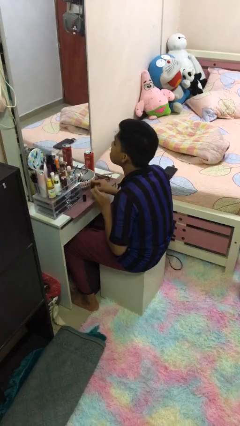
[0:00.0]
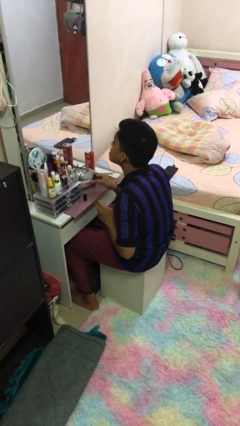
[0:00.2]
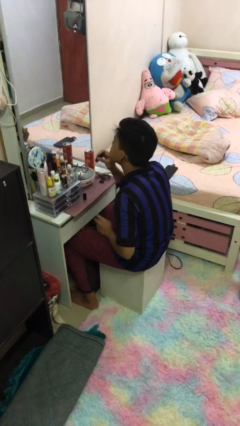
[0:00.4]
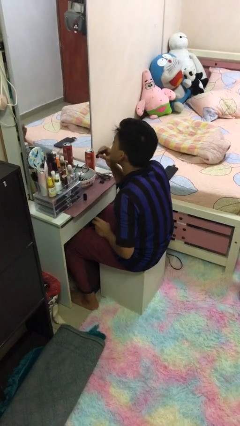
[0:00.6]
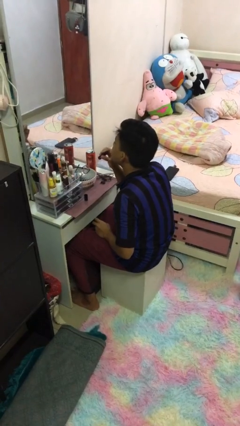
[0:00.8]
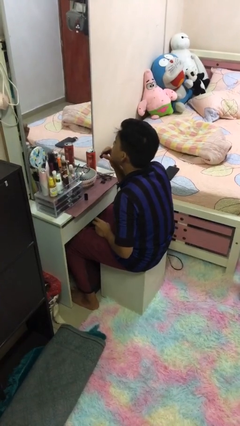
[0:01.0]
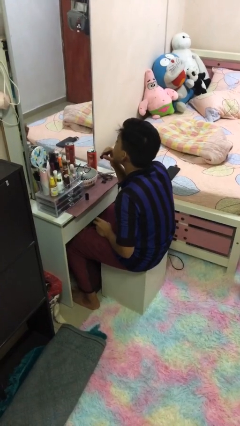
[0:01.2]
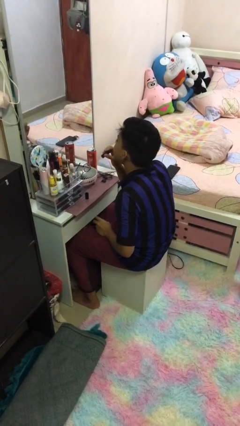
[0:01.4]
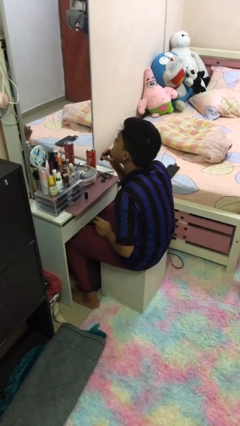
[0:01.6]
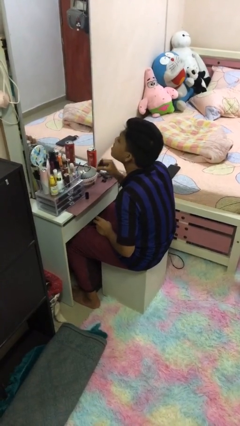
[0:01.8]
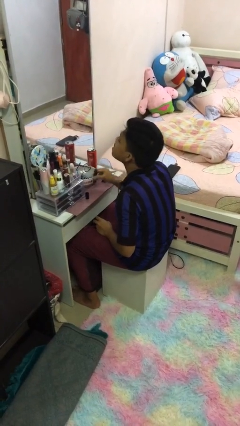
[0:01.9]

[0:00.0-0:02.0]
person applies lip makeup

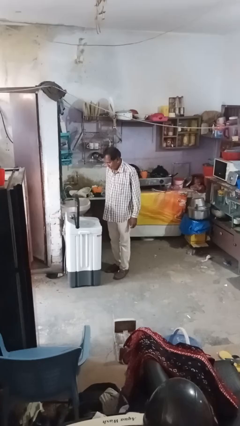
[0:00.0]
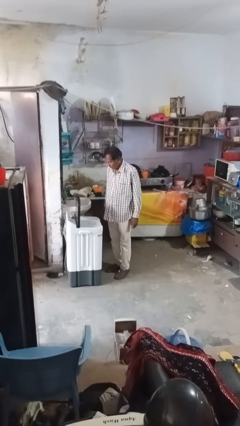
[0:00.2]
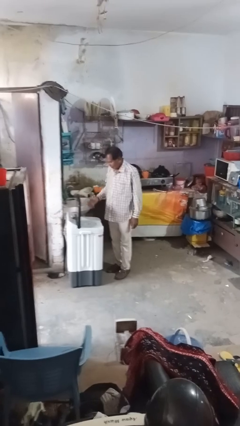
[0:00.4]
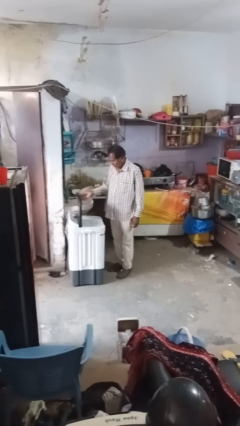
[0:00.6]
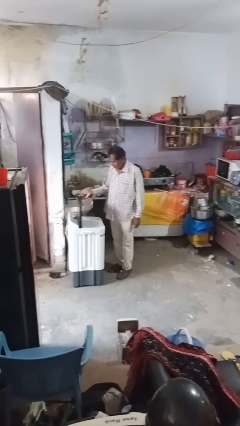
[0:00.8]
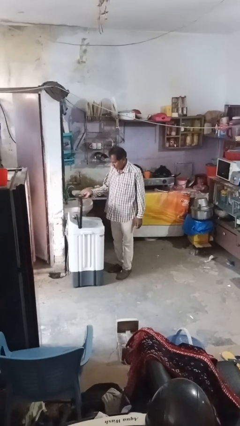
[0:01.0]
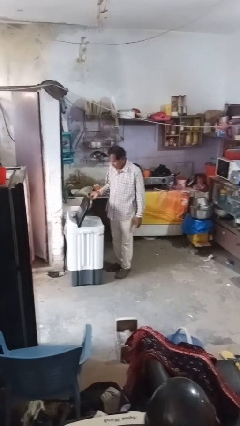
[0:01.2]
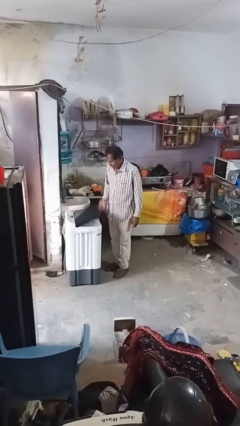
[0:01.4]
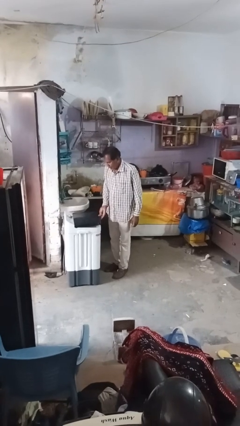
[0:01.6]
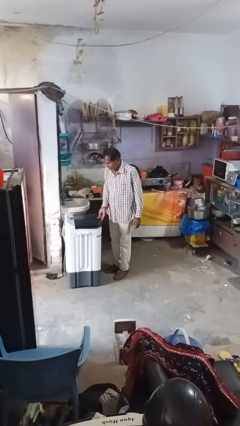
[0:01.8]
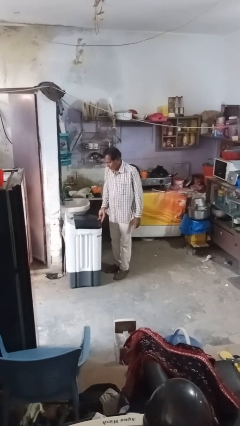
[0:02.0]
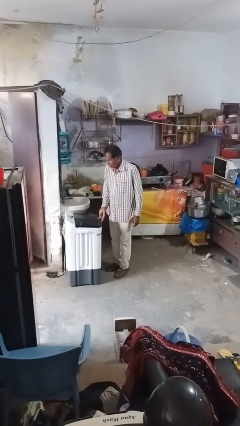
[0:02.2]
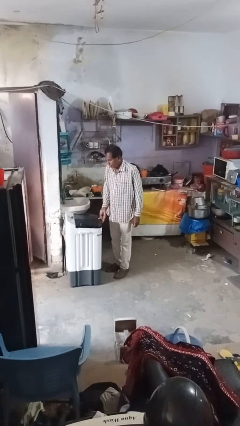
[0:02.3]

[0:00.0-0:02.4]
person closes clothes washer

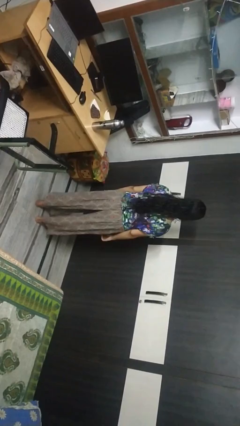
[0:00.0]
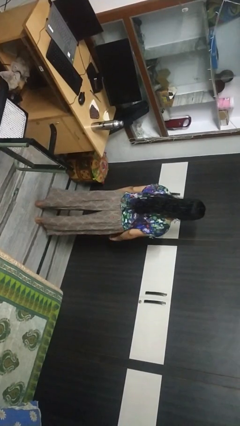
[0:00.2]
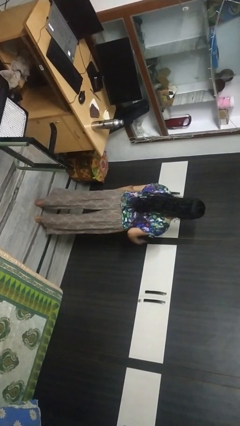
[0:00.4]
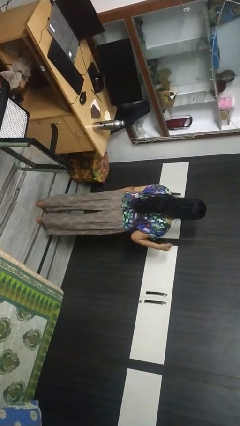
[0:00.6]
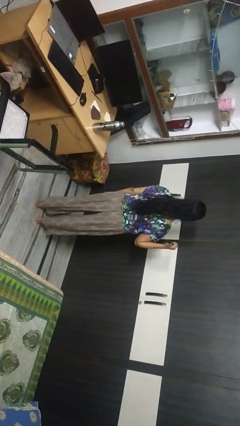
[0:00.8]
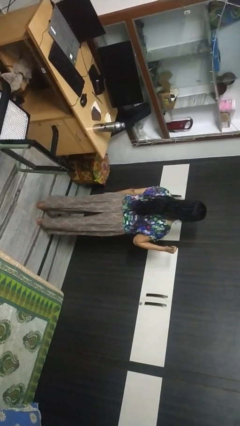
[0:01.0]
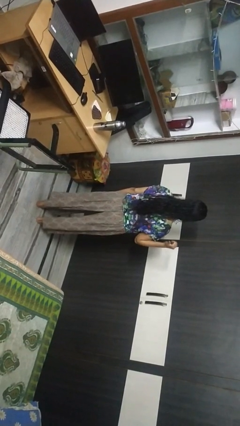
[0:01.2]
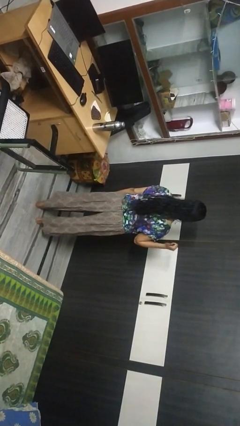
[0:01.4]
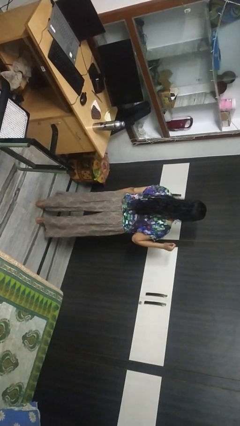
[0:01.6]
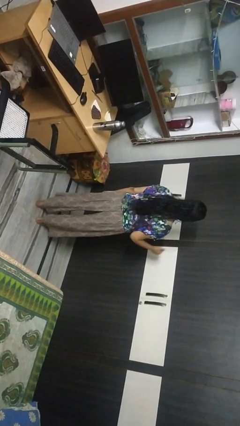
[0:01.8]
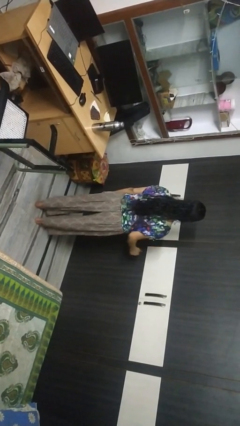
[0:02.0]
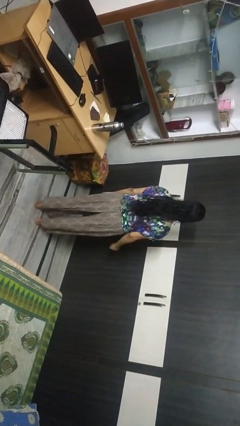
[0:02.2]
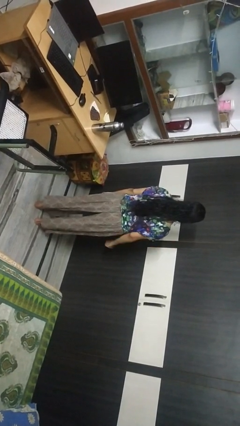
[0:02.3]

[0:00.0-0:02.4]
person gestures behind me

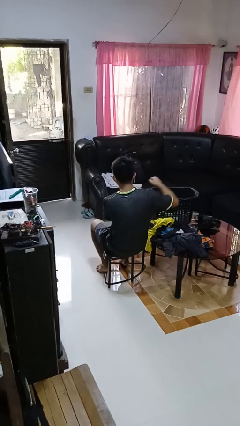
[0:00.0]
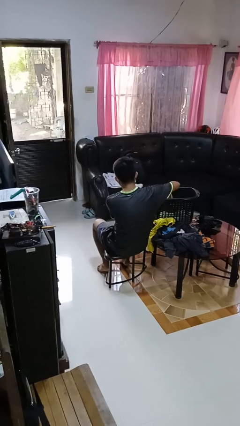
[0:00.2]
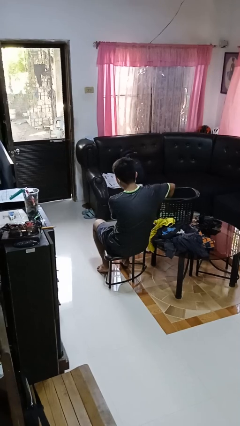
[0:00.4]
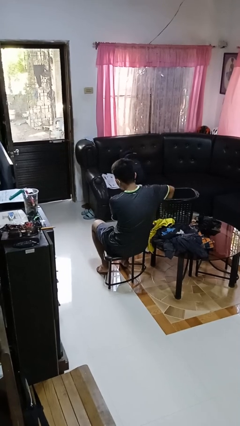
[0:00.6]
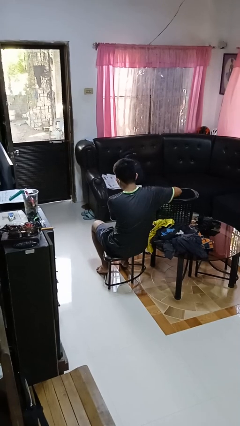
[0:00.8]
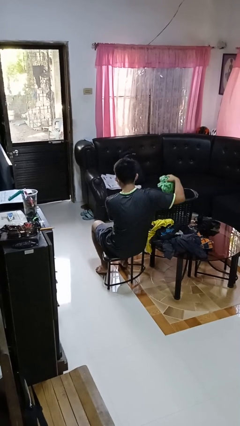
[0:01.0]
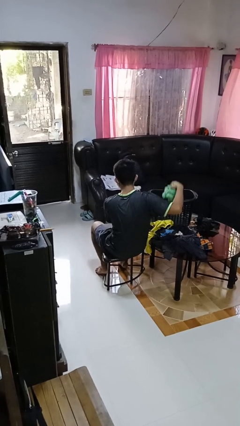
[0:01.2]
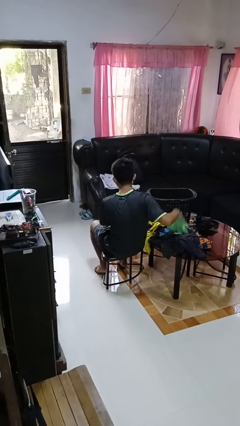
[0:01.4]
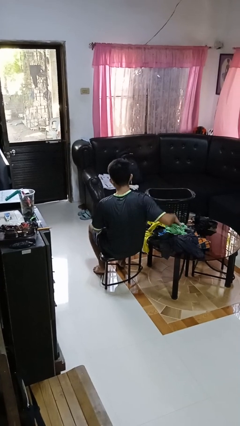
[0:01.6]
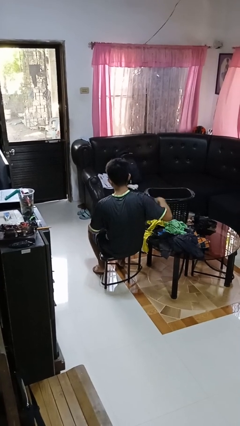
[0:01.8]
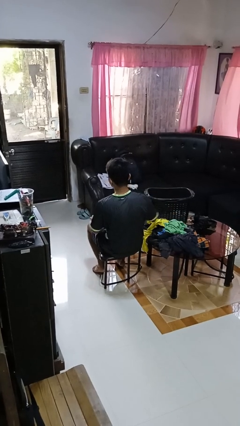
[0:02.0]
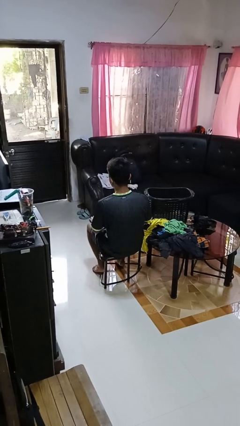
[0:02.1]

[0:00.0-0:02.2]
person takes object from basket

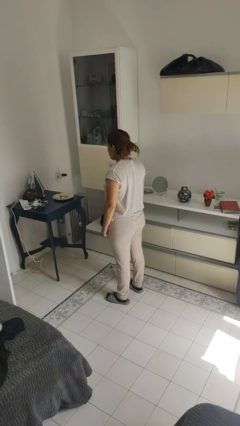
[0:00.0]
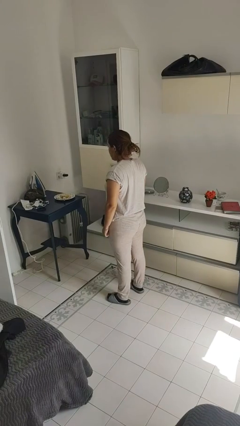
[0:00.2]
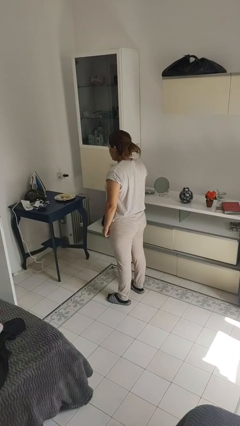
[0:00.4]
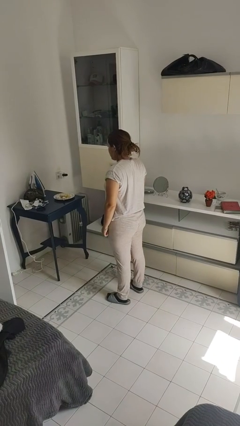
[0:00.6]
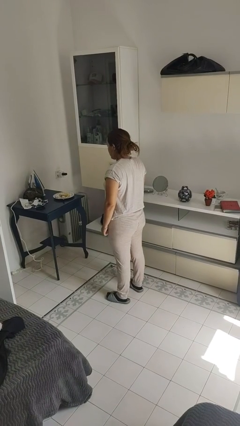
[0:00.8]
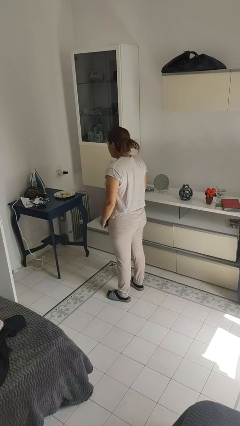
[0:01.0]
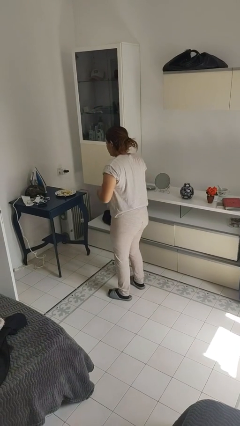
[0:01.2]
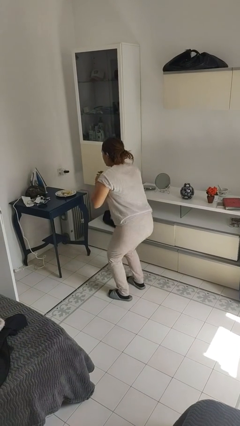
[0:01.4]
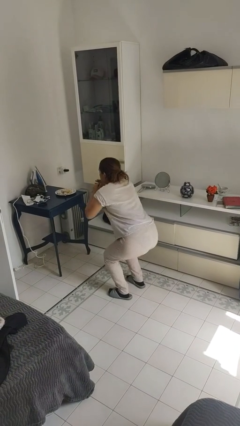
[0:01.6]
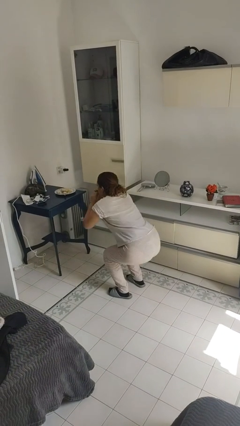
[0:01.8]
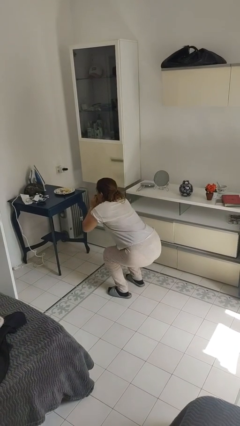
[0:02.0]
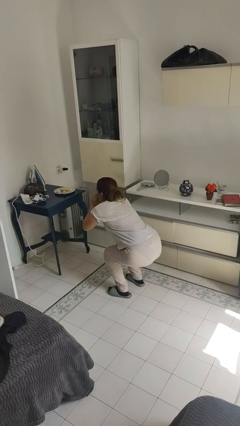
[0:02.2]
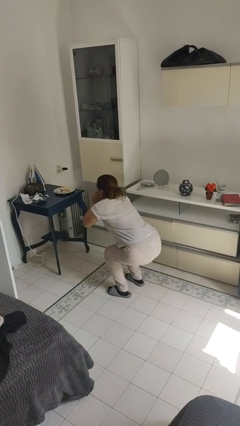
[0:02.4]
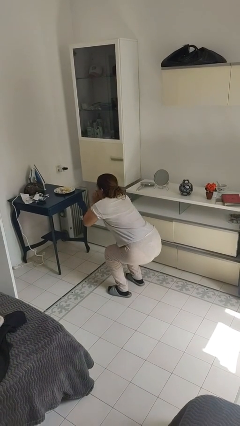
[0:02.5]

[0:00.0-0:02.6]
person squats

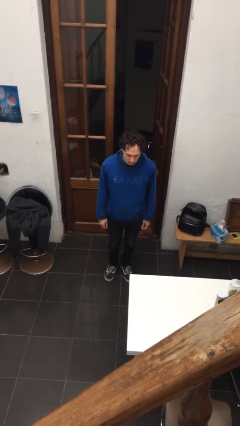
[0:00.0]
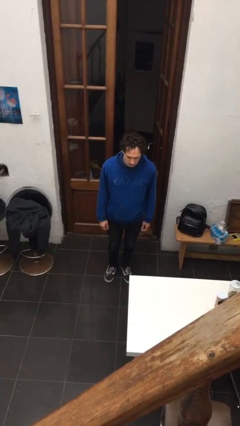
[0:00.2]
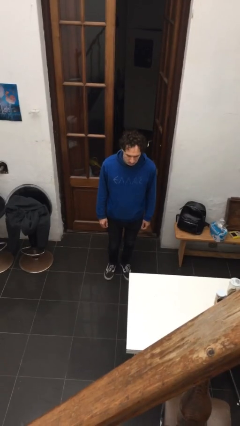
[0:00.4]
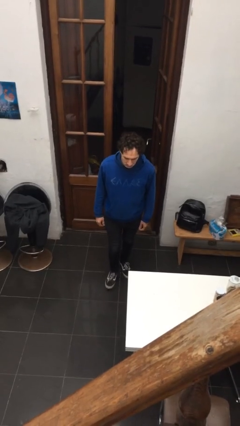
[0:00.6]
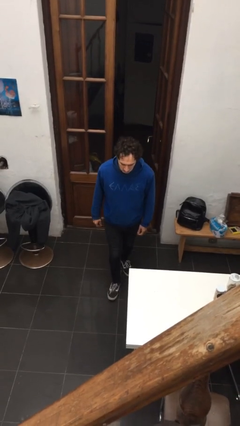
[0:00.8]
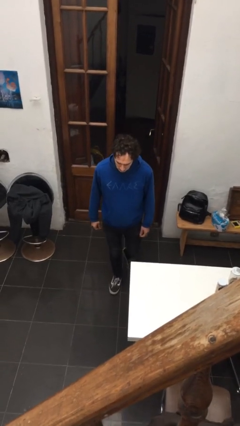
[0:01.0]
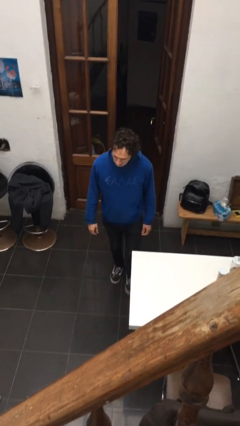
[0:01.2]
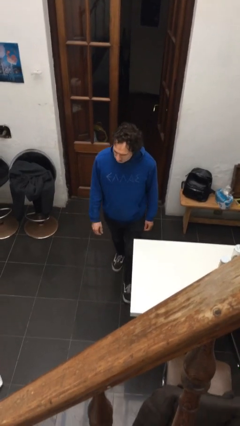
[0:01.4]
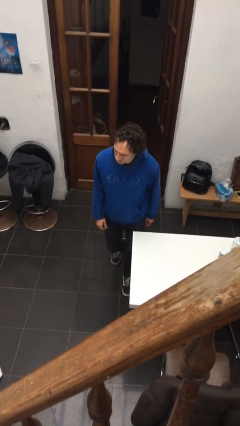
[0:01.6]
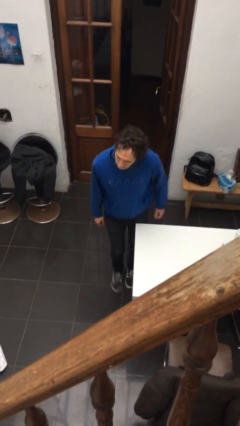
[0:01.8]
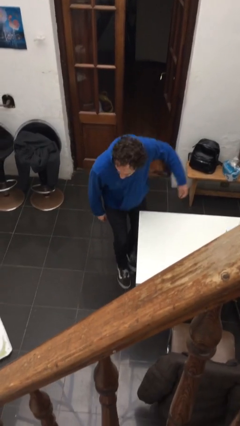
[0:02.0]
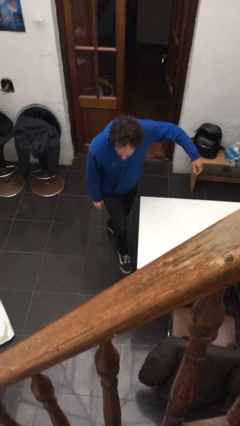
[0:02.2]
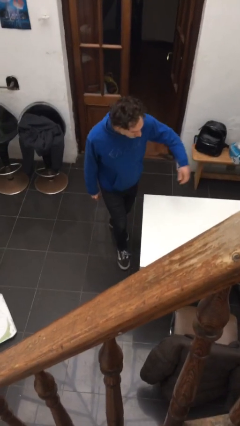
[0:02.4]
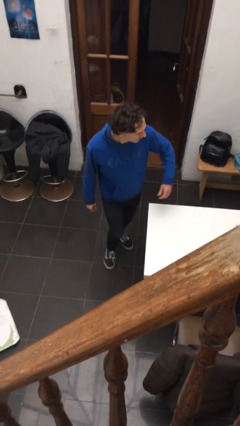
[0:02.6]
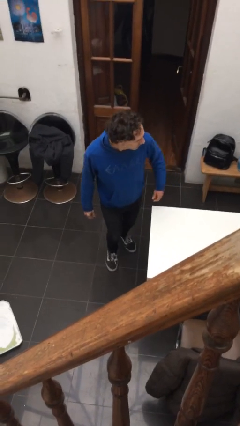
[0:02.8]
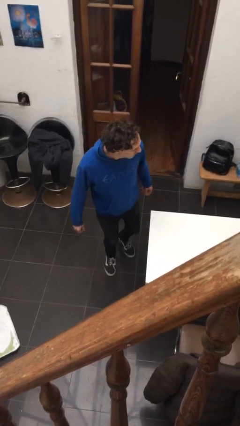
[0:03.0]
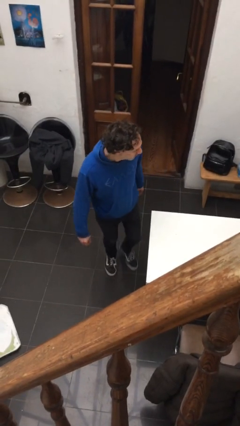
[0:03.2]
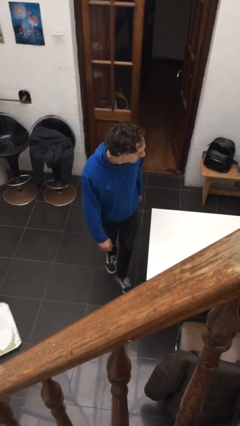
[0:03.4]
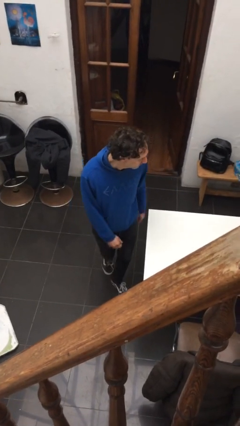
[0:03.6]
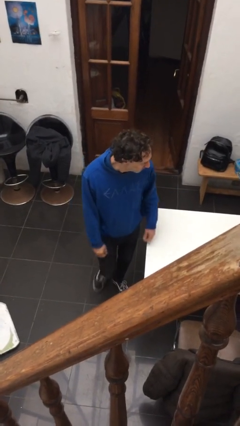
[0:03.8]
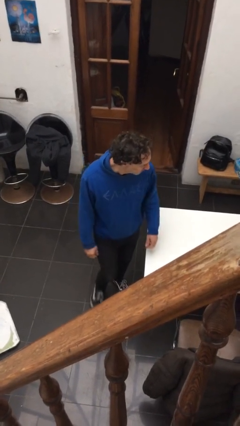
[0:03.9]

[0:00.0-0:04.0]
person bumps into table

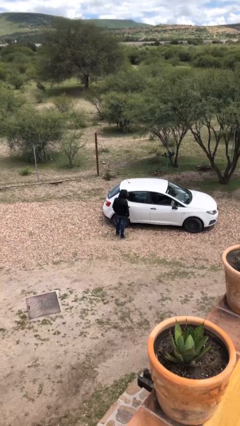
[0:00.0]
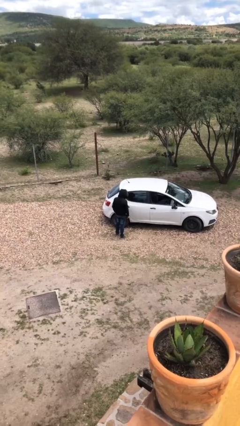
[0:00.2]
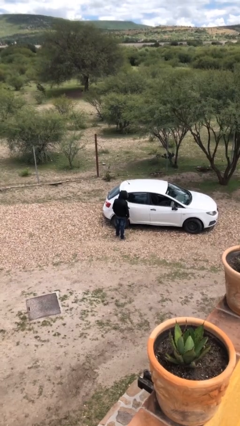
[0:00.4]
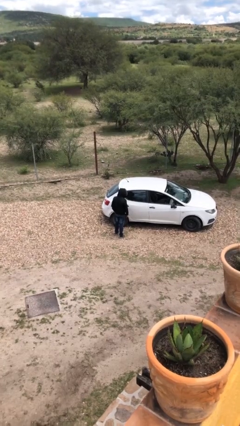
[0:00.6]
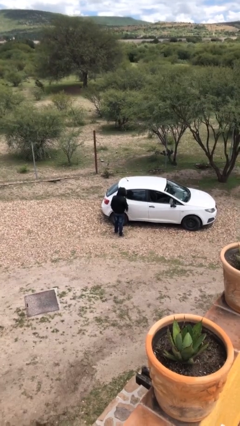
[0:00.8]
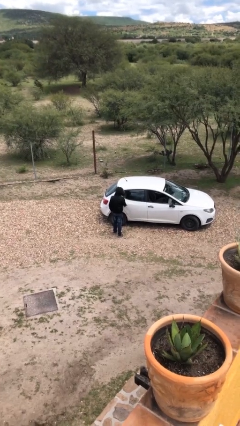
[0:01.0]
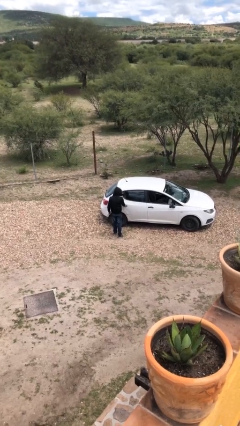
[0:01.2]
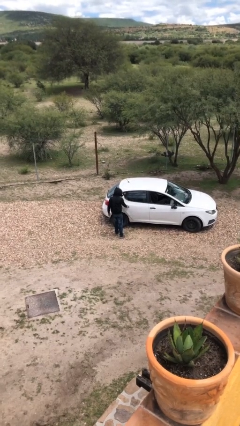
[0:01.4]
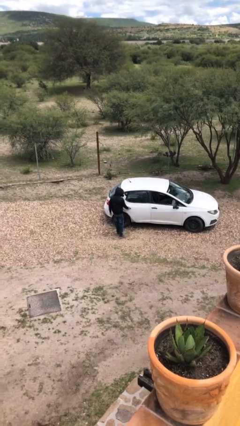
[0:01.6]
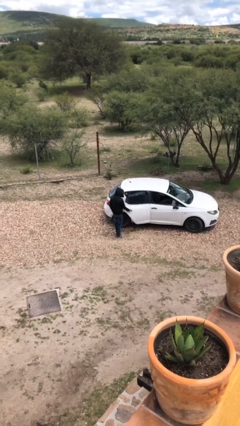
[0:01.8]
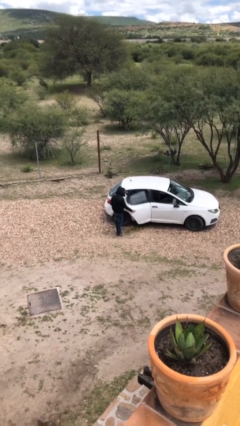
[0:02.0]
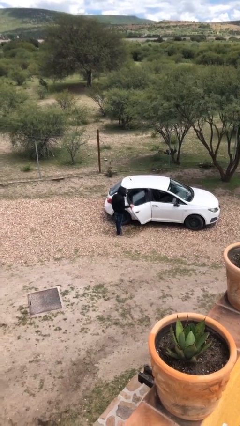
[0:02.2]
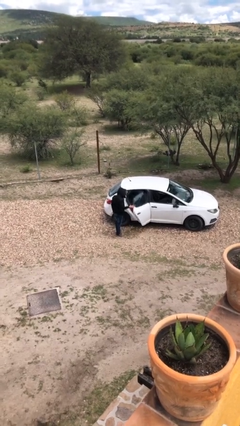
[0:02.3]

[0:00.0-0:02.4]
person opens car door
